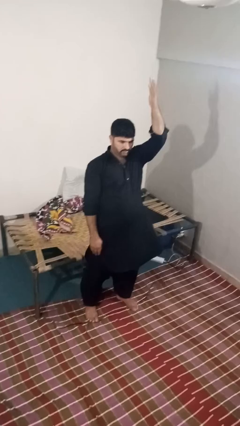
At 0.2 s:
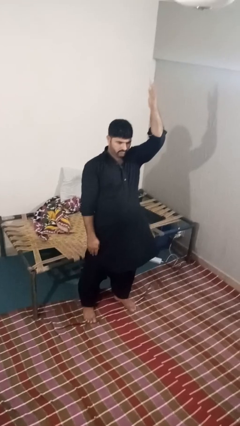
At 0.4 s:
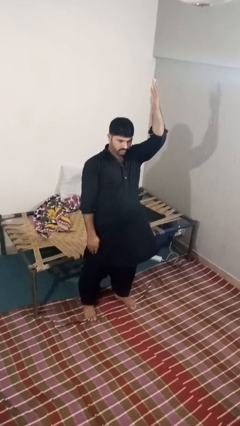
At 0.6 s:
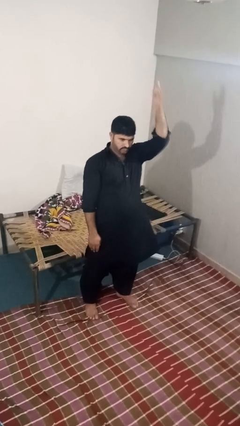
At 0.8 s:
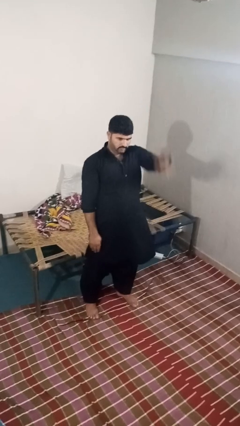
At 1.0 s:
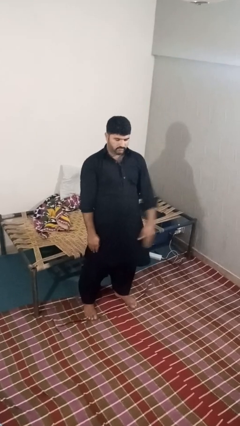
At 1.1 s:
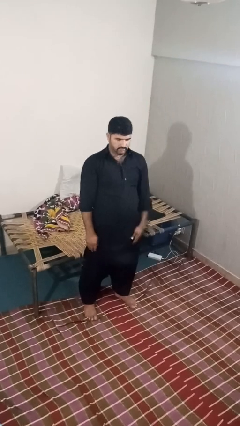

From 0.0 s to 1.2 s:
person gestures swipe down

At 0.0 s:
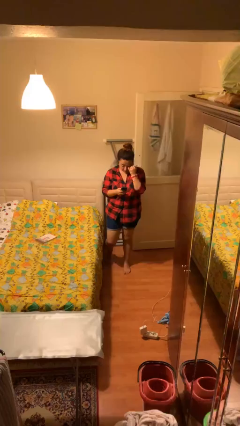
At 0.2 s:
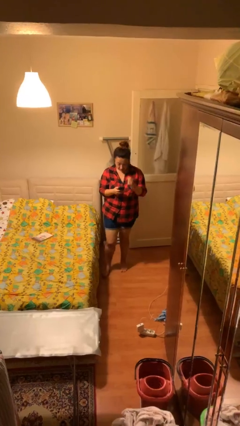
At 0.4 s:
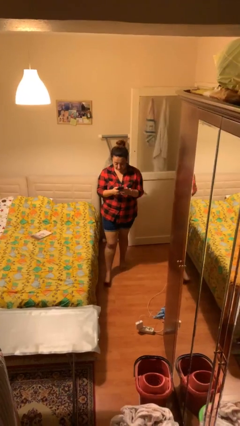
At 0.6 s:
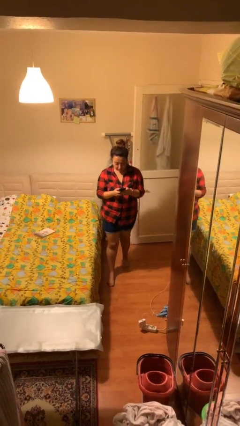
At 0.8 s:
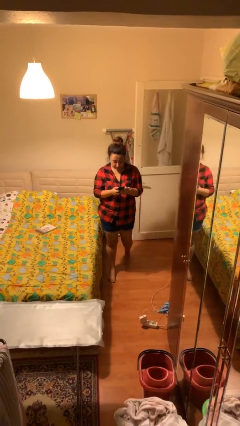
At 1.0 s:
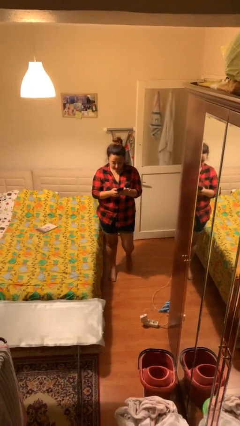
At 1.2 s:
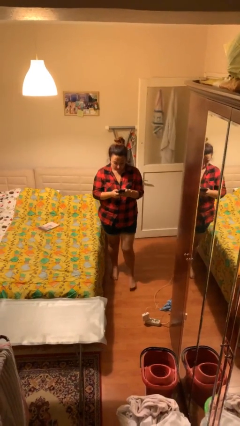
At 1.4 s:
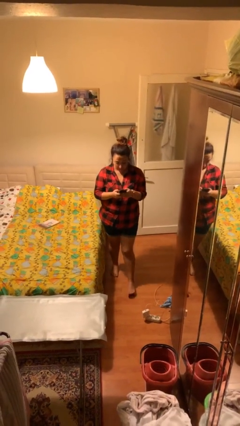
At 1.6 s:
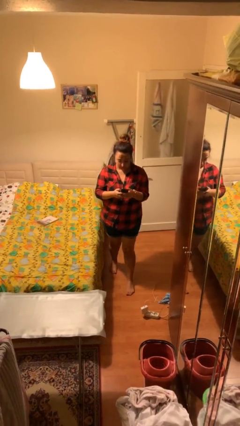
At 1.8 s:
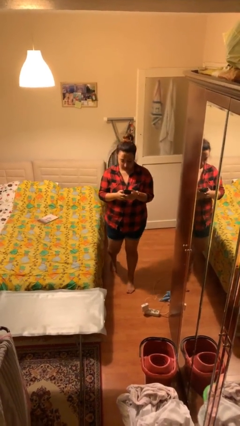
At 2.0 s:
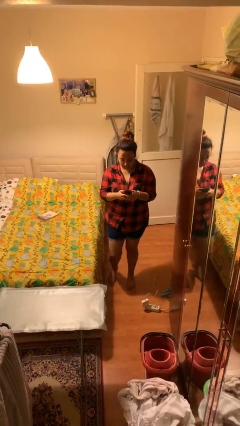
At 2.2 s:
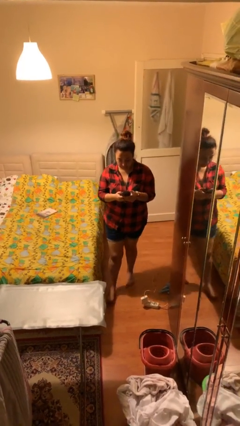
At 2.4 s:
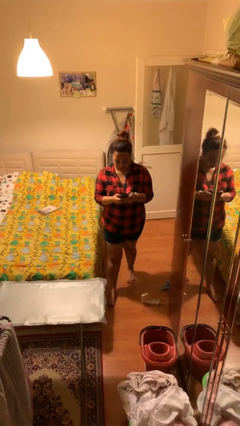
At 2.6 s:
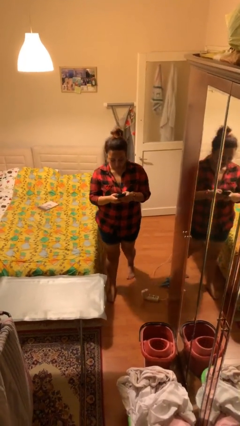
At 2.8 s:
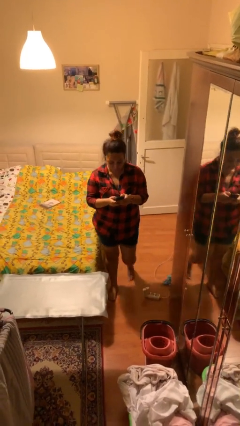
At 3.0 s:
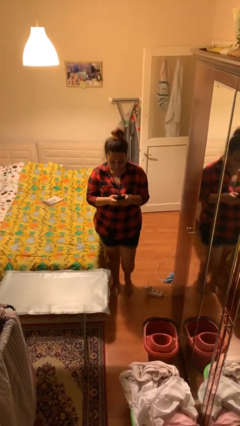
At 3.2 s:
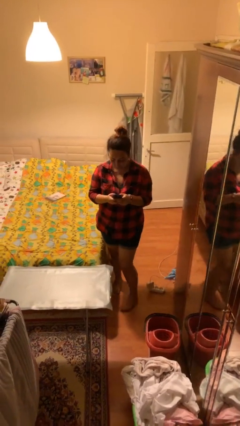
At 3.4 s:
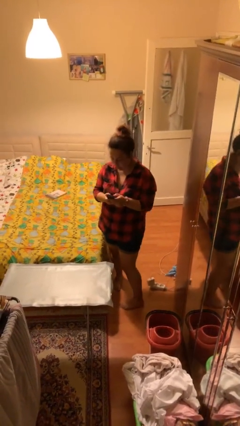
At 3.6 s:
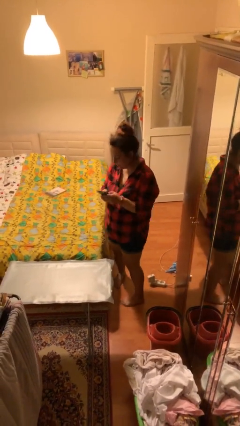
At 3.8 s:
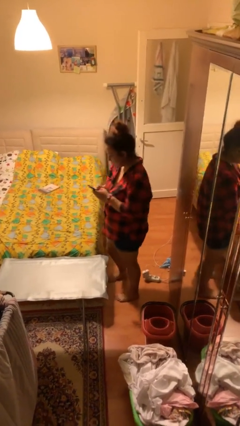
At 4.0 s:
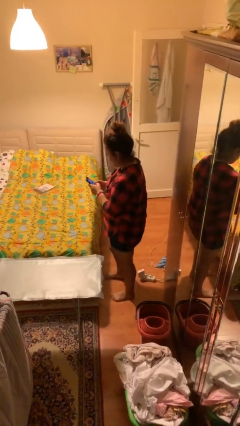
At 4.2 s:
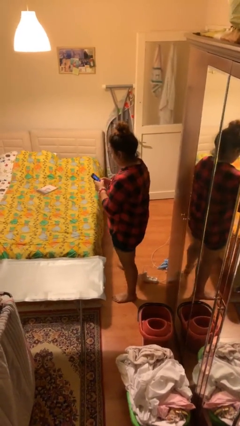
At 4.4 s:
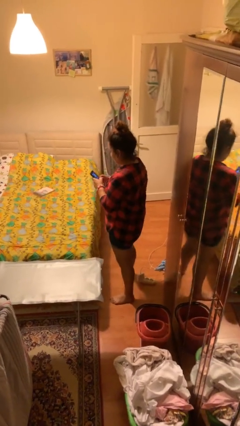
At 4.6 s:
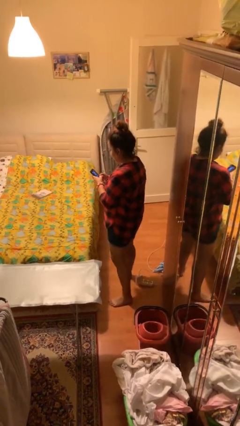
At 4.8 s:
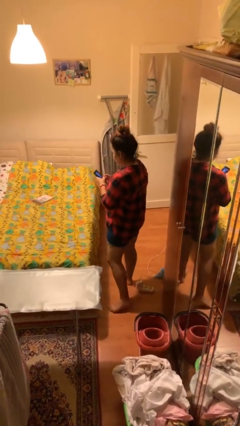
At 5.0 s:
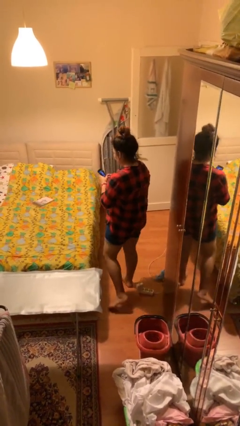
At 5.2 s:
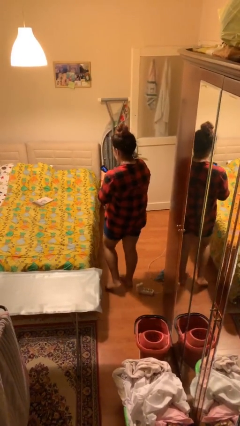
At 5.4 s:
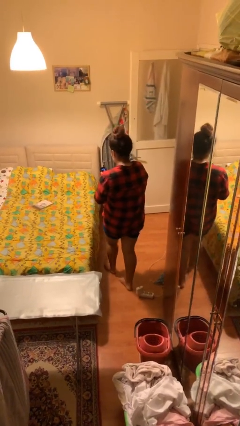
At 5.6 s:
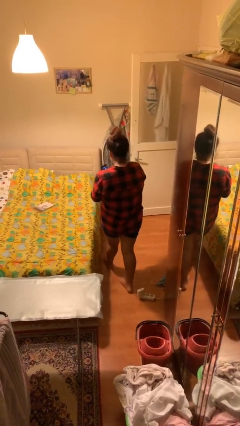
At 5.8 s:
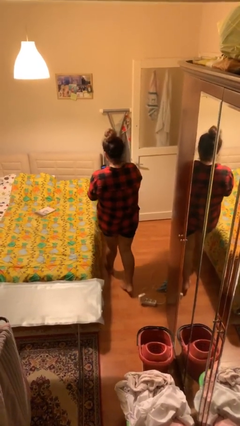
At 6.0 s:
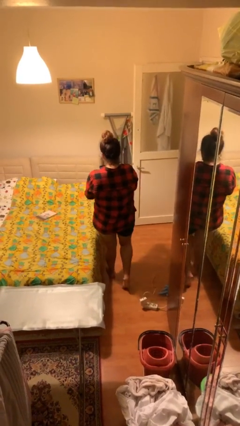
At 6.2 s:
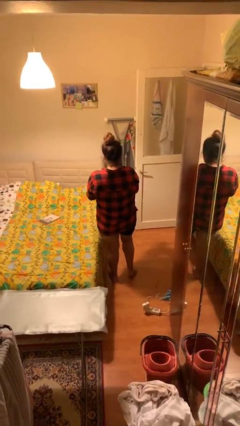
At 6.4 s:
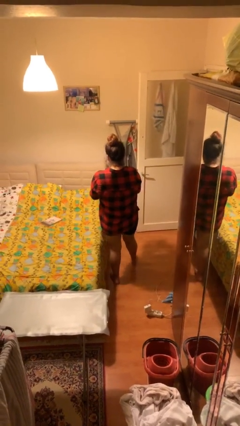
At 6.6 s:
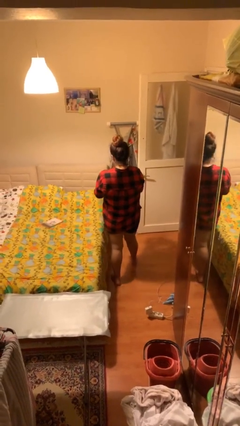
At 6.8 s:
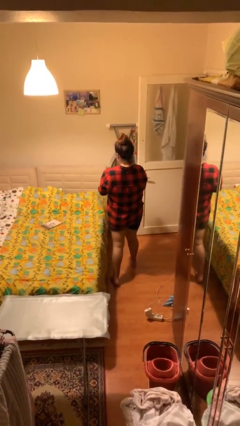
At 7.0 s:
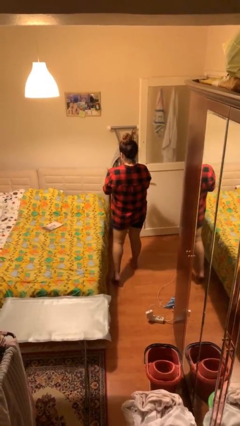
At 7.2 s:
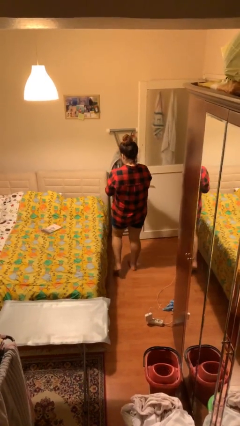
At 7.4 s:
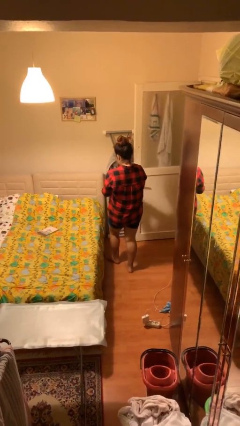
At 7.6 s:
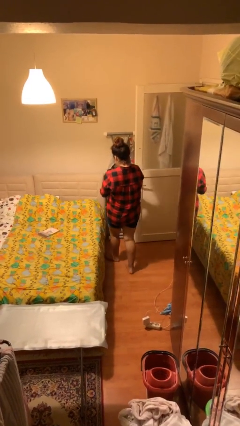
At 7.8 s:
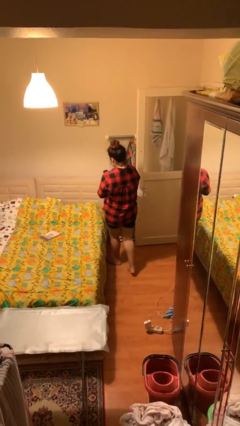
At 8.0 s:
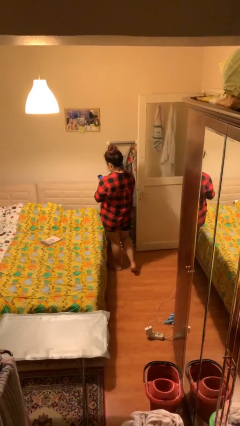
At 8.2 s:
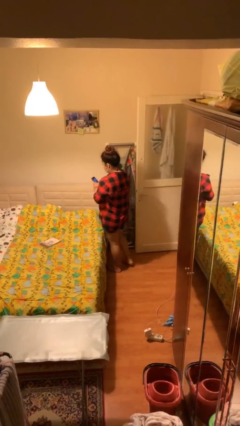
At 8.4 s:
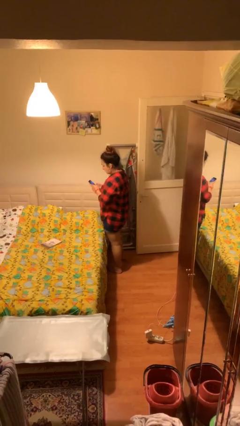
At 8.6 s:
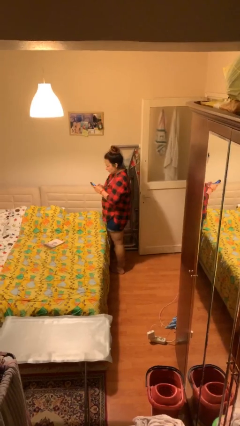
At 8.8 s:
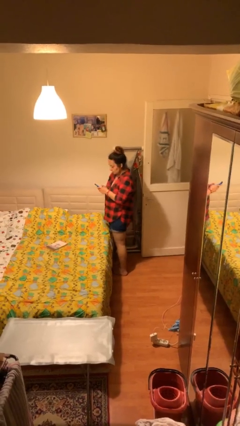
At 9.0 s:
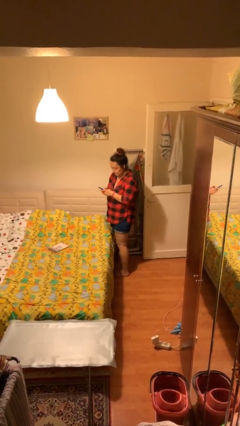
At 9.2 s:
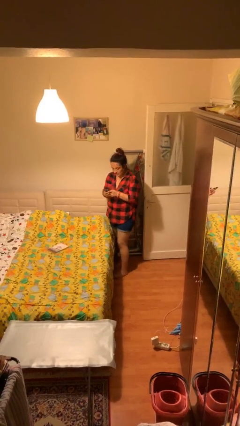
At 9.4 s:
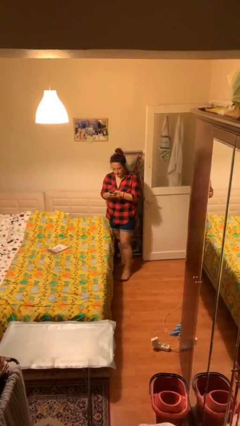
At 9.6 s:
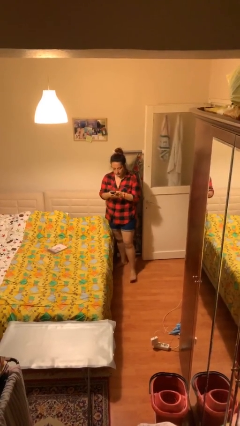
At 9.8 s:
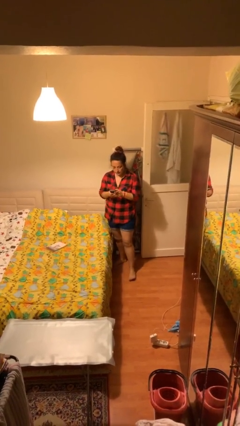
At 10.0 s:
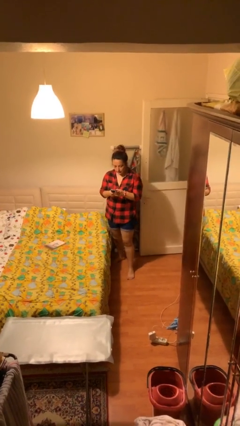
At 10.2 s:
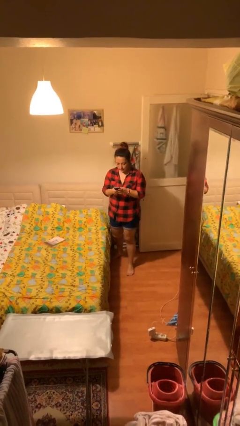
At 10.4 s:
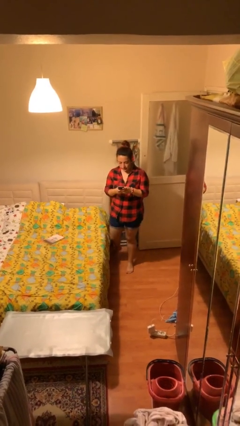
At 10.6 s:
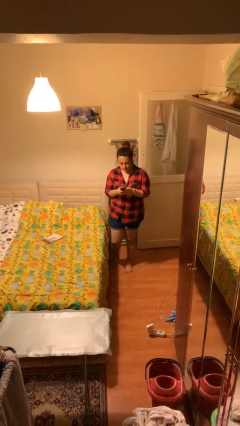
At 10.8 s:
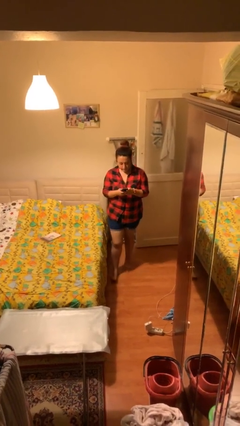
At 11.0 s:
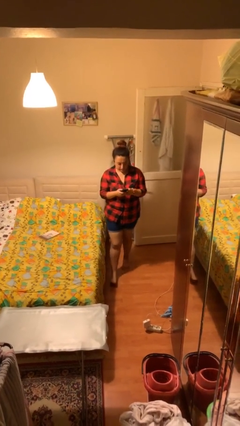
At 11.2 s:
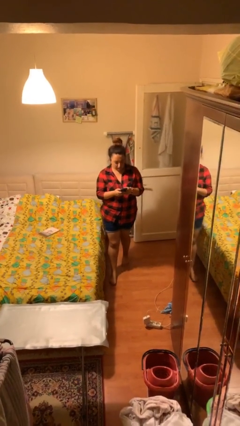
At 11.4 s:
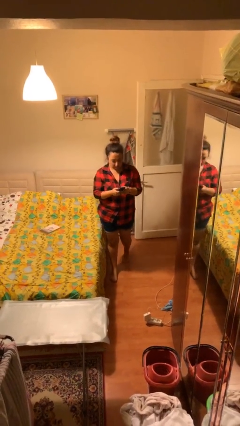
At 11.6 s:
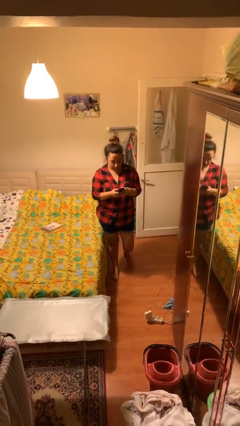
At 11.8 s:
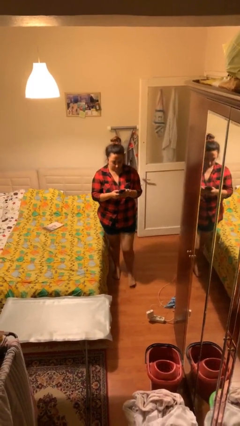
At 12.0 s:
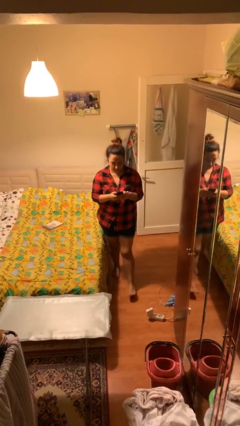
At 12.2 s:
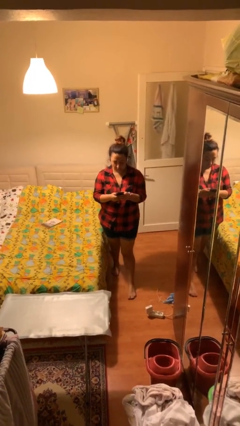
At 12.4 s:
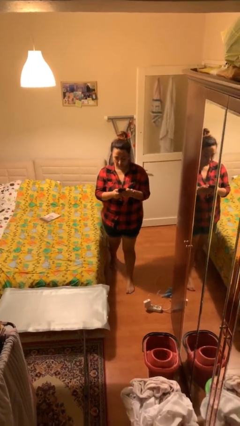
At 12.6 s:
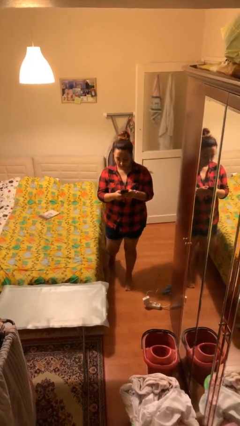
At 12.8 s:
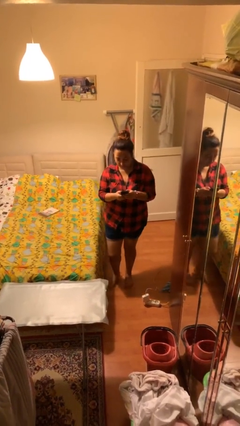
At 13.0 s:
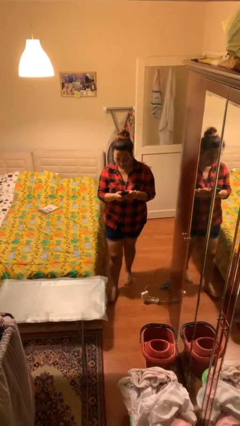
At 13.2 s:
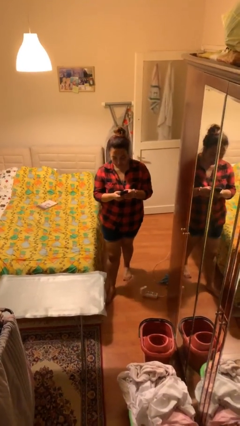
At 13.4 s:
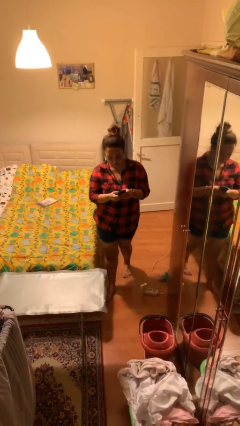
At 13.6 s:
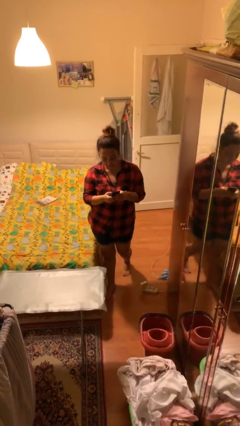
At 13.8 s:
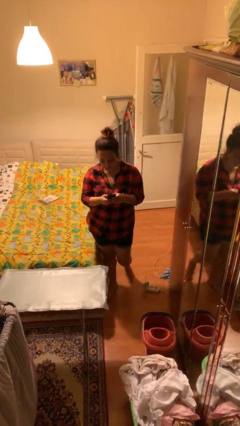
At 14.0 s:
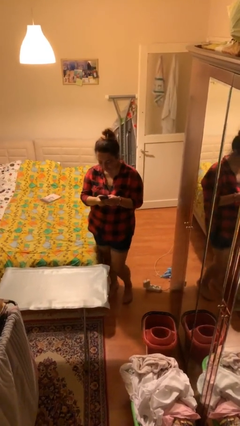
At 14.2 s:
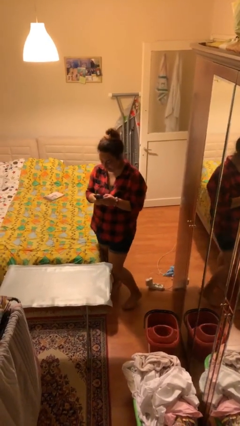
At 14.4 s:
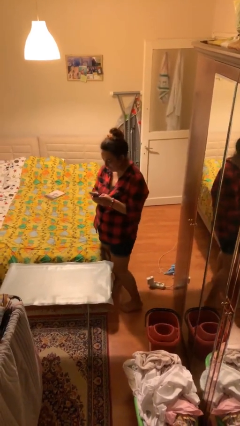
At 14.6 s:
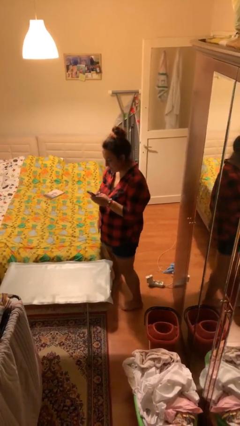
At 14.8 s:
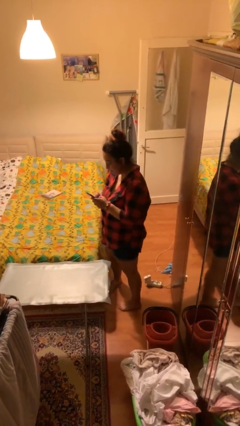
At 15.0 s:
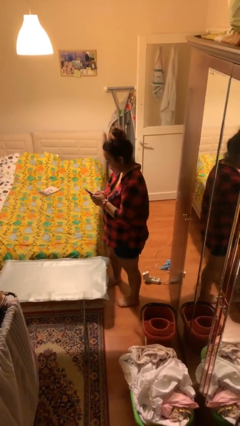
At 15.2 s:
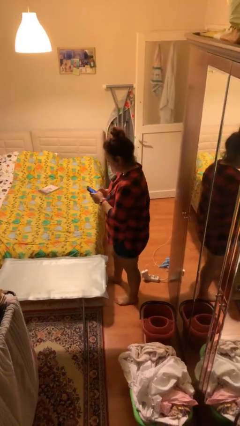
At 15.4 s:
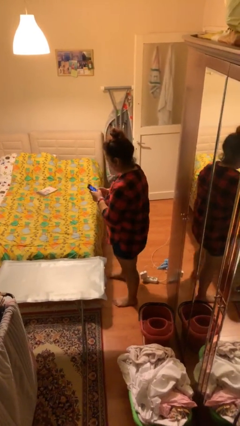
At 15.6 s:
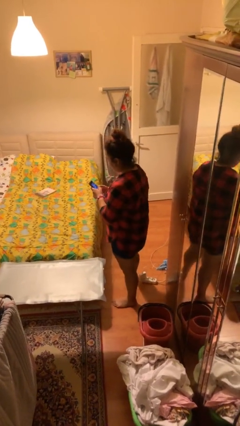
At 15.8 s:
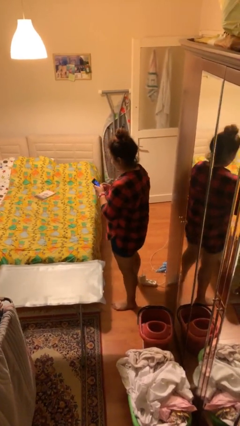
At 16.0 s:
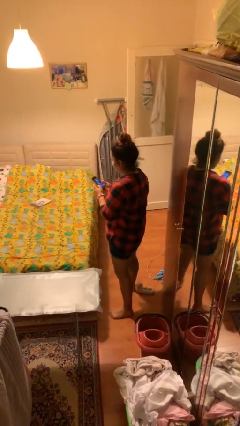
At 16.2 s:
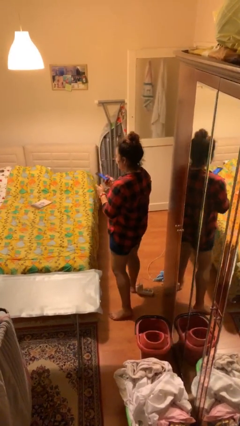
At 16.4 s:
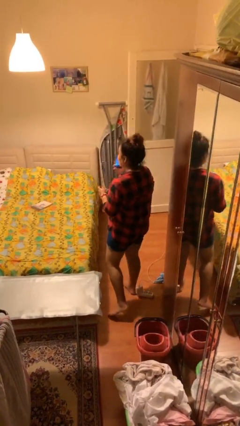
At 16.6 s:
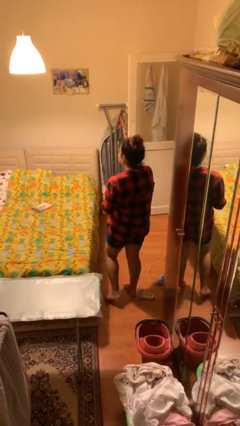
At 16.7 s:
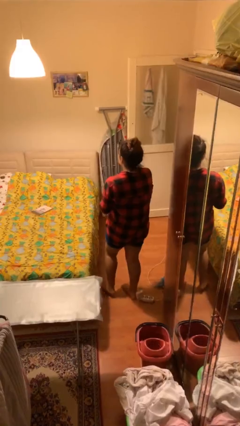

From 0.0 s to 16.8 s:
person texts on phone
